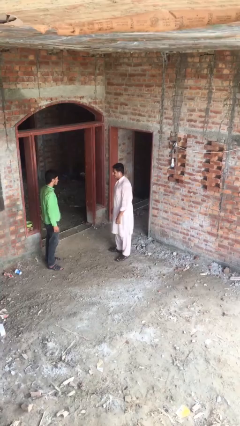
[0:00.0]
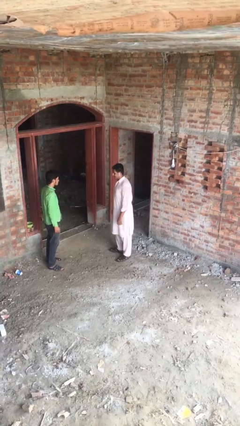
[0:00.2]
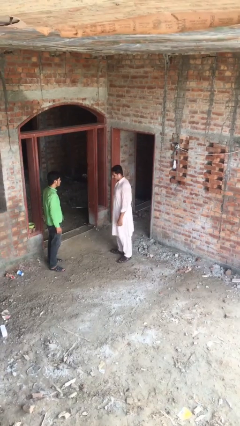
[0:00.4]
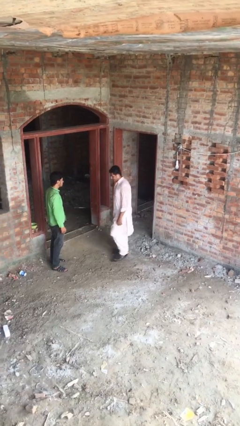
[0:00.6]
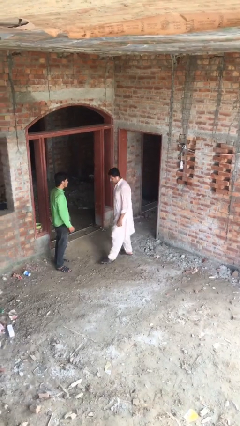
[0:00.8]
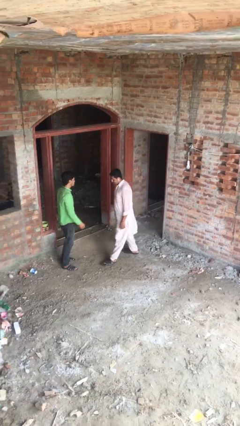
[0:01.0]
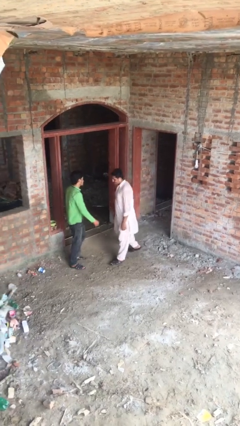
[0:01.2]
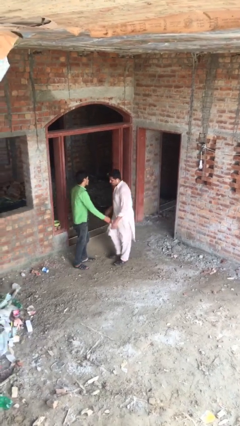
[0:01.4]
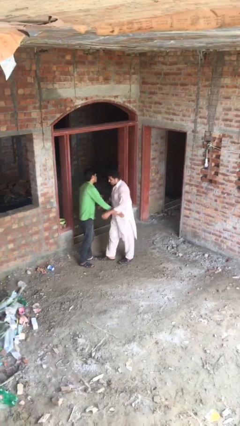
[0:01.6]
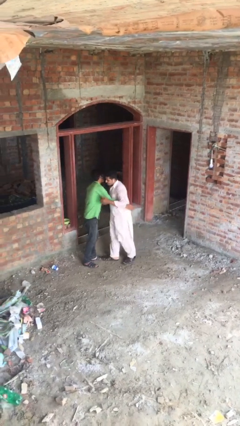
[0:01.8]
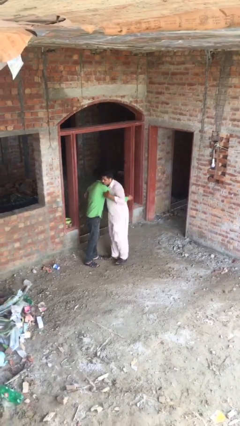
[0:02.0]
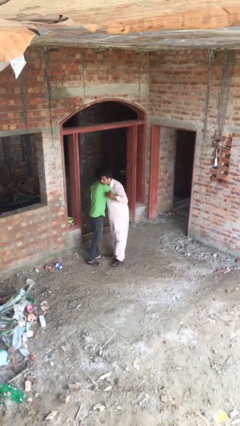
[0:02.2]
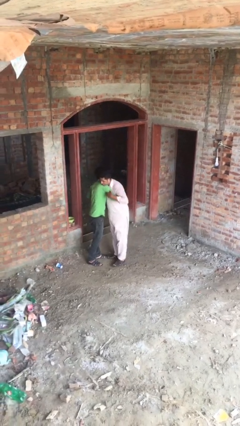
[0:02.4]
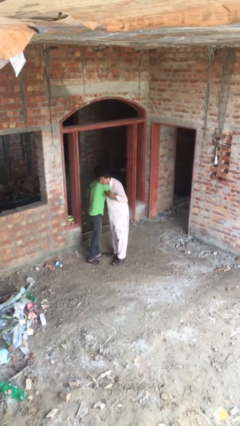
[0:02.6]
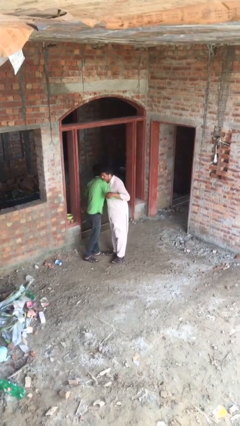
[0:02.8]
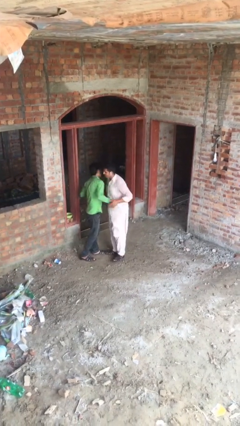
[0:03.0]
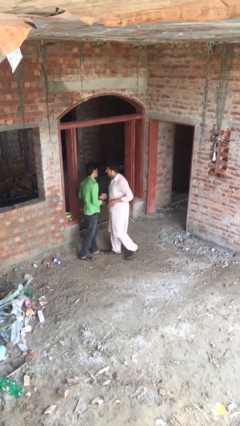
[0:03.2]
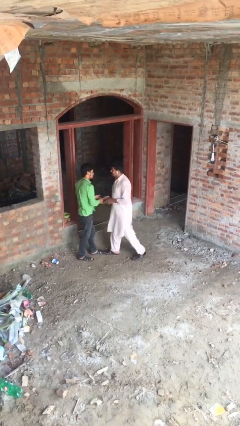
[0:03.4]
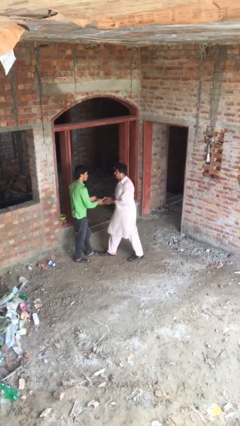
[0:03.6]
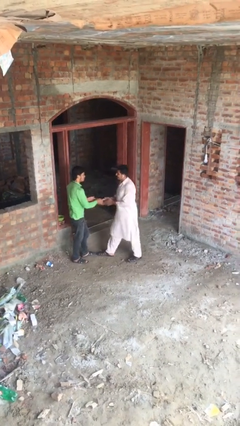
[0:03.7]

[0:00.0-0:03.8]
person embraces person

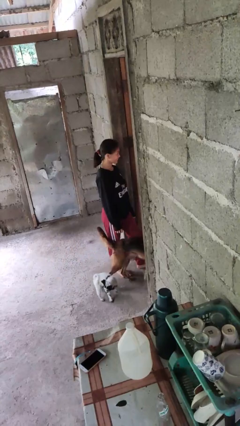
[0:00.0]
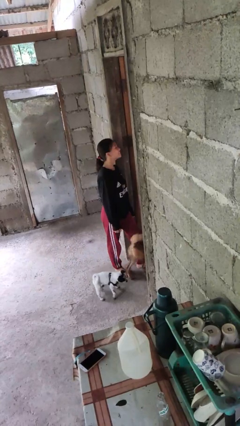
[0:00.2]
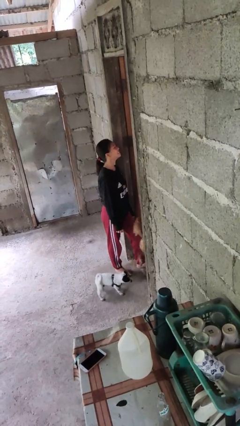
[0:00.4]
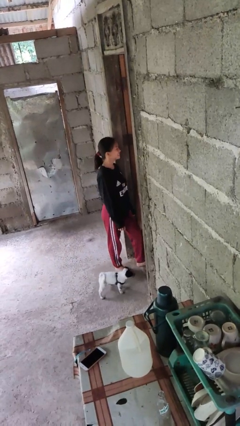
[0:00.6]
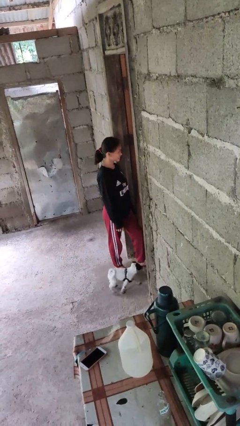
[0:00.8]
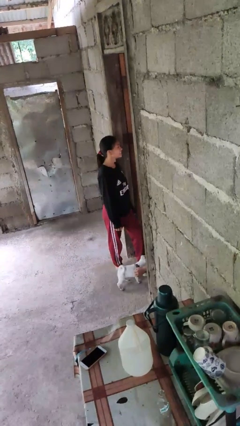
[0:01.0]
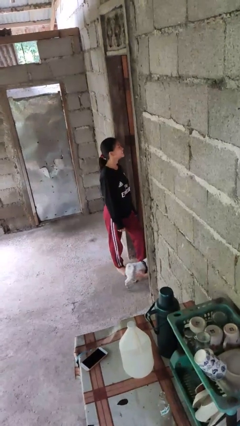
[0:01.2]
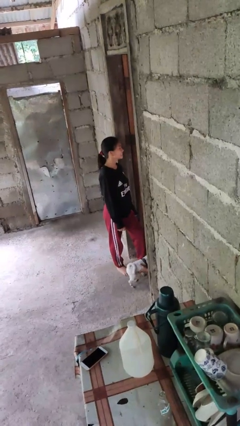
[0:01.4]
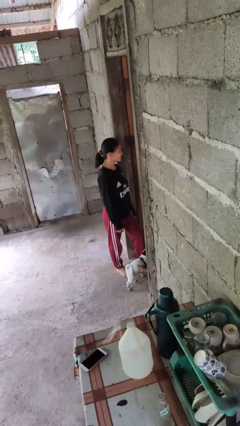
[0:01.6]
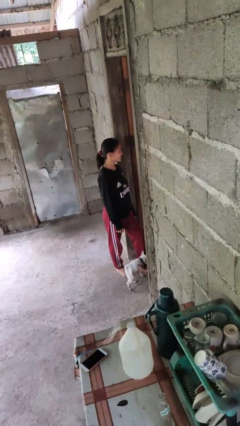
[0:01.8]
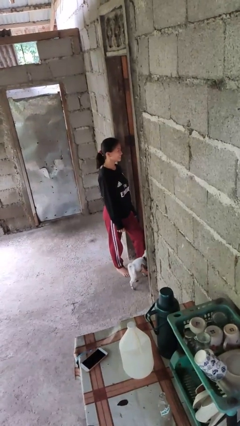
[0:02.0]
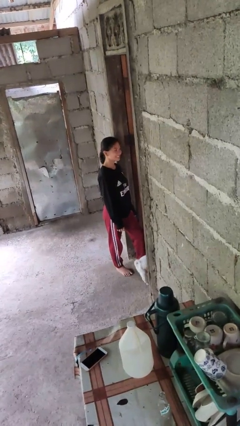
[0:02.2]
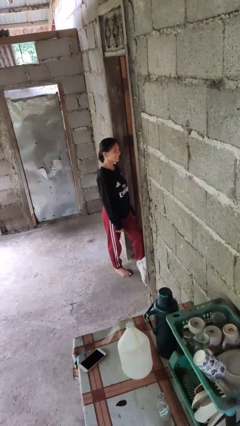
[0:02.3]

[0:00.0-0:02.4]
person nods head

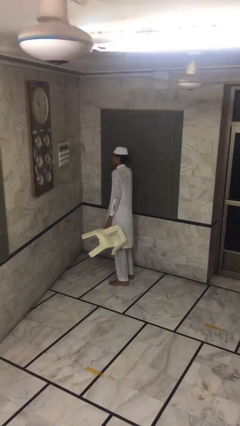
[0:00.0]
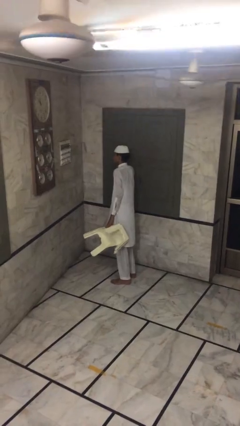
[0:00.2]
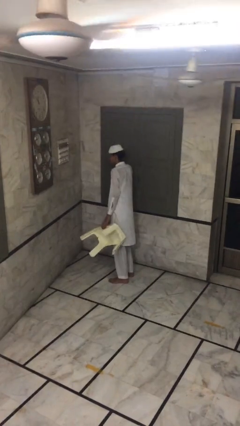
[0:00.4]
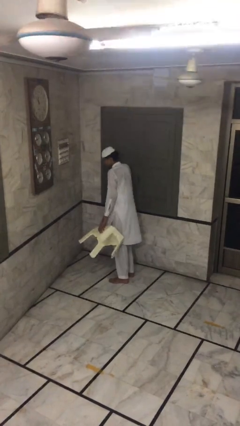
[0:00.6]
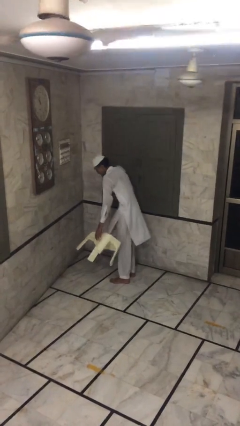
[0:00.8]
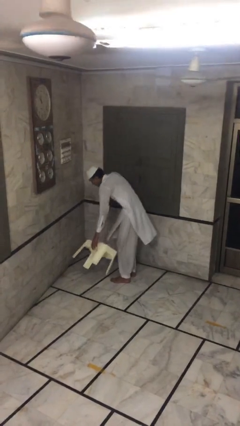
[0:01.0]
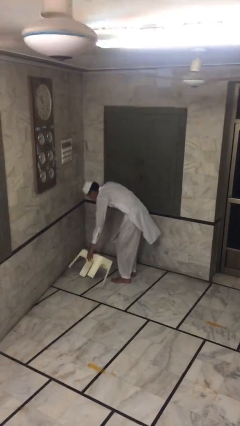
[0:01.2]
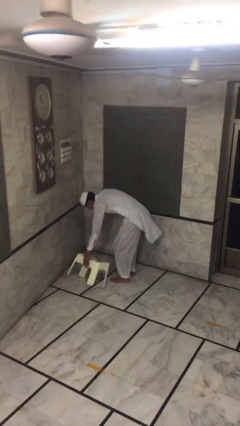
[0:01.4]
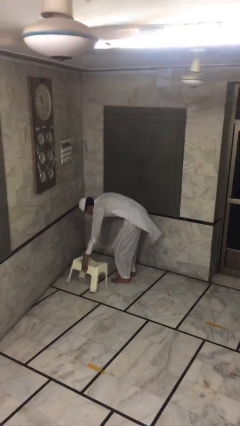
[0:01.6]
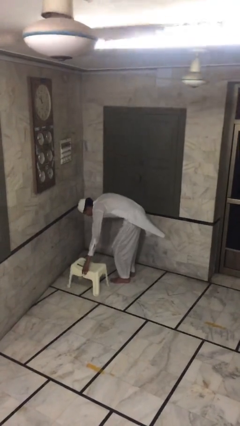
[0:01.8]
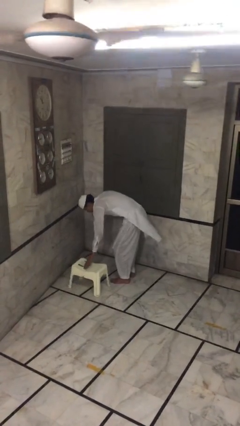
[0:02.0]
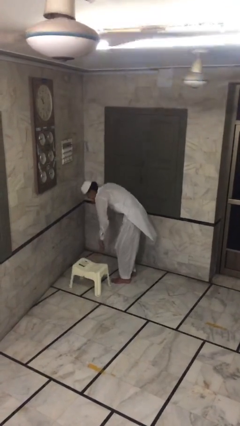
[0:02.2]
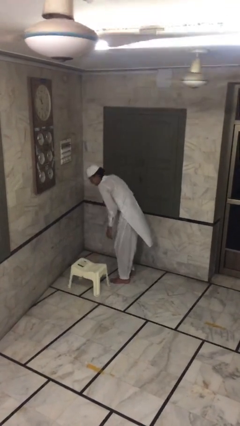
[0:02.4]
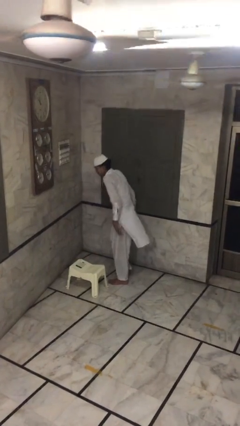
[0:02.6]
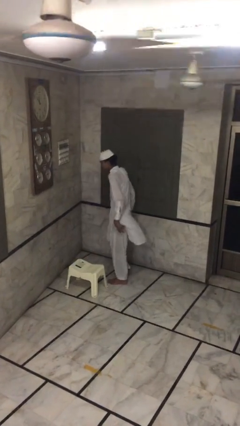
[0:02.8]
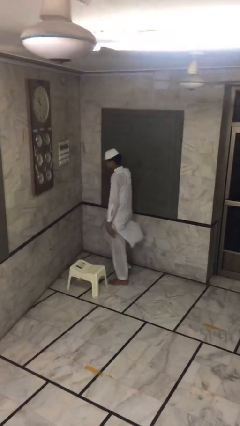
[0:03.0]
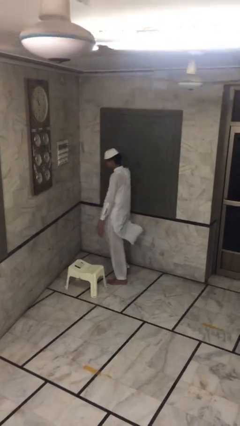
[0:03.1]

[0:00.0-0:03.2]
person puts down object on floor

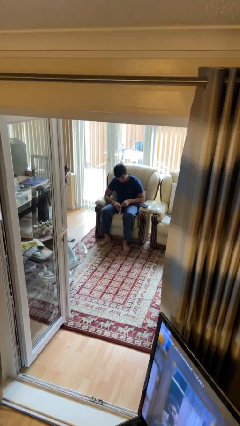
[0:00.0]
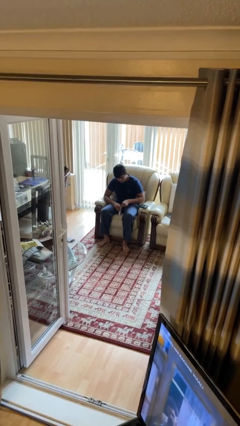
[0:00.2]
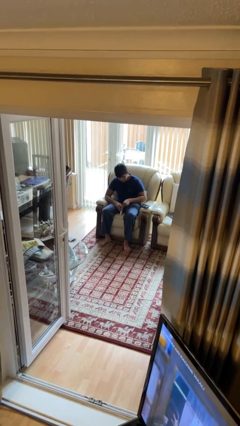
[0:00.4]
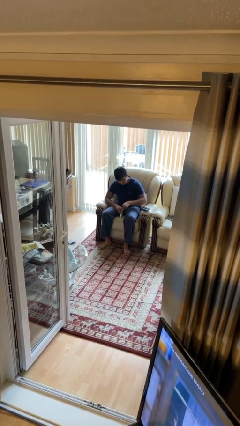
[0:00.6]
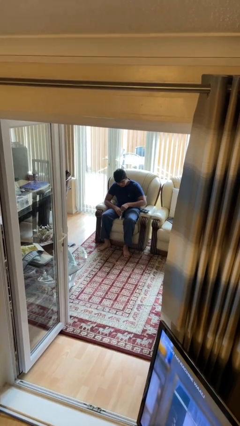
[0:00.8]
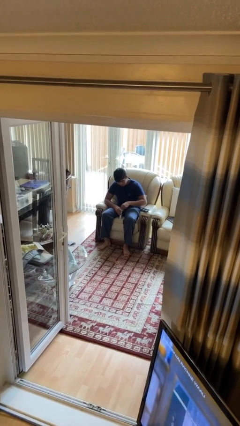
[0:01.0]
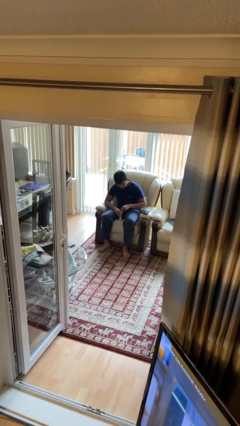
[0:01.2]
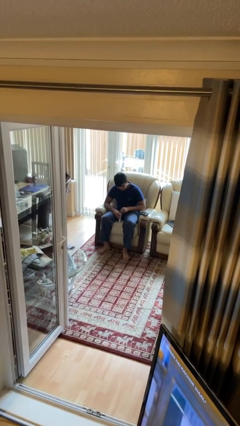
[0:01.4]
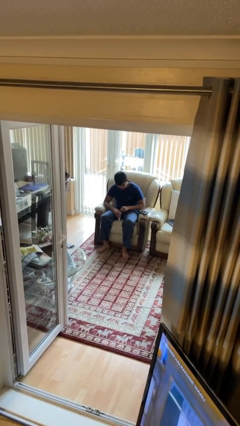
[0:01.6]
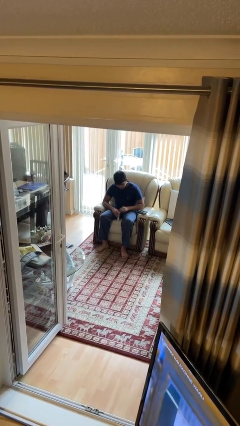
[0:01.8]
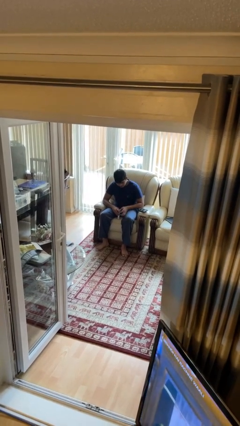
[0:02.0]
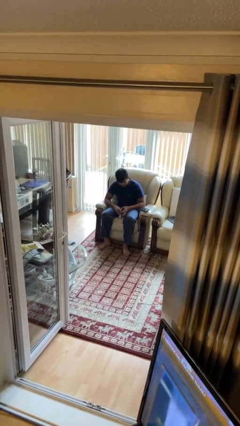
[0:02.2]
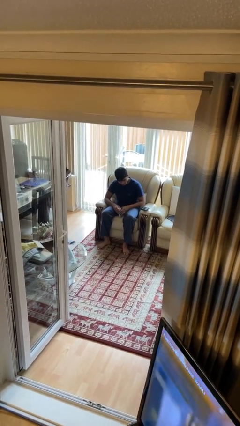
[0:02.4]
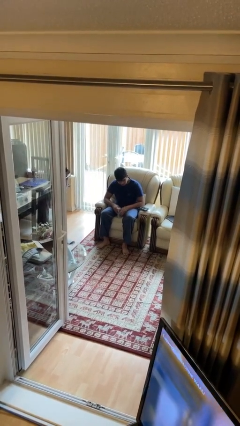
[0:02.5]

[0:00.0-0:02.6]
person opens beverage can

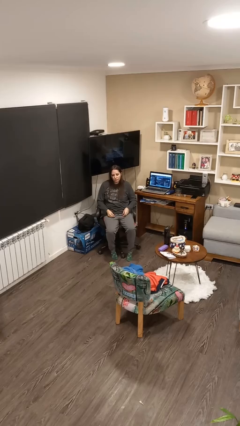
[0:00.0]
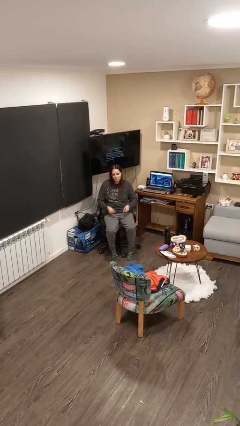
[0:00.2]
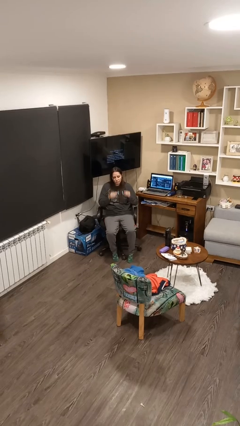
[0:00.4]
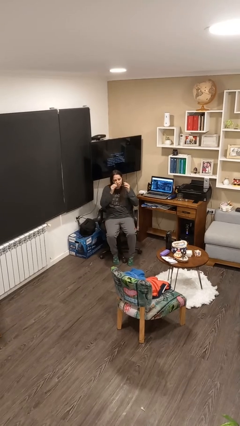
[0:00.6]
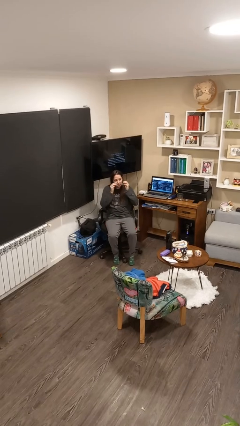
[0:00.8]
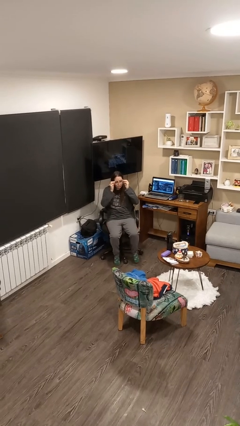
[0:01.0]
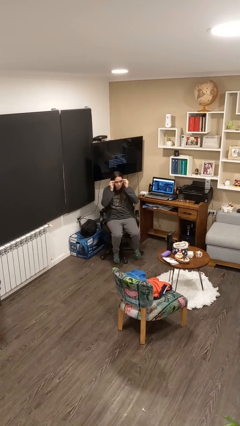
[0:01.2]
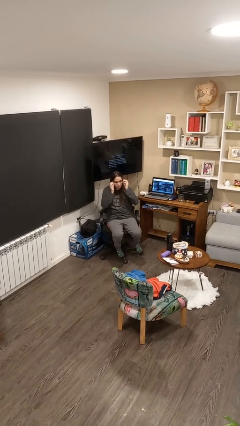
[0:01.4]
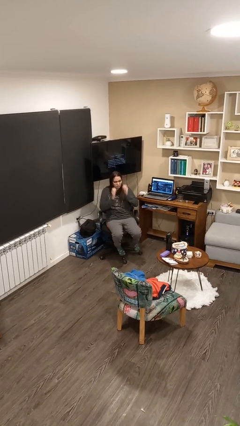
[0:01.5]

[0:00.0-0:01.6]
person puts on glasses

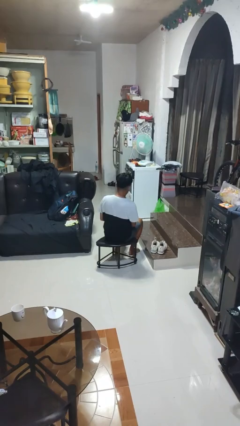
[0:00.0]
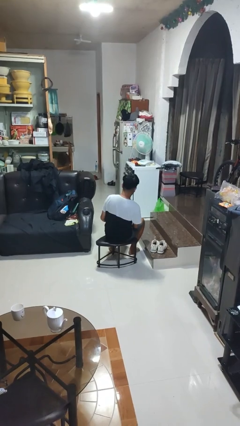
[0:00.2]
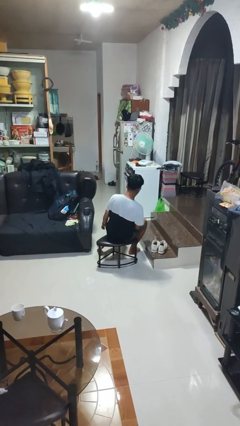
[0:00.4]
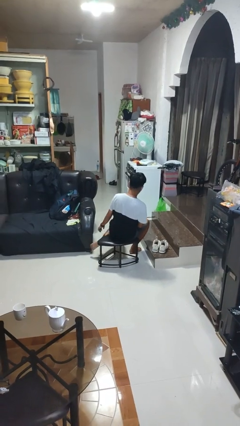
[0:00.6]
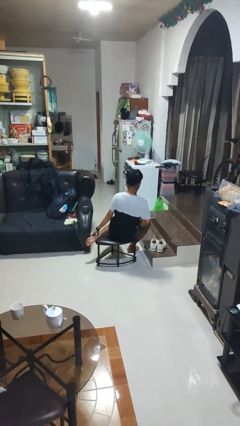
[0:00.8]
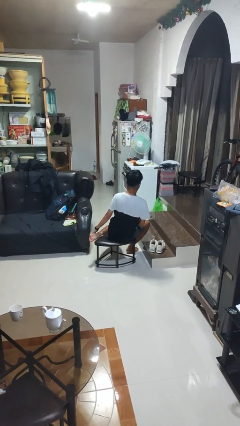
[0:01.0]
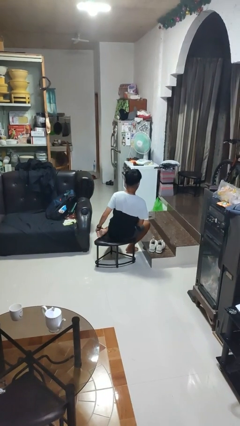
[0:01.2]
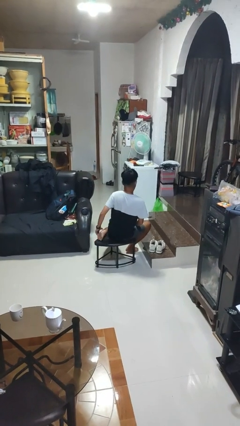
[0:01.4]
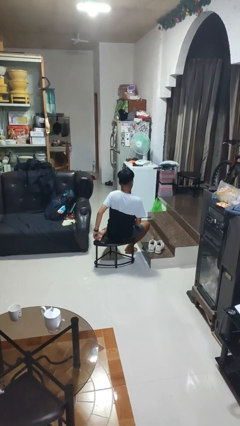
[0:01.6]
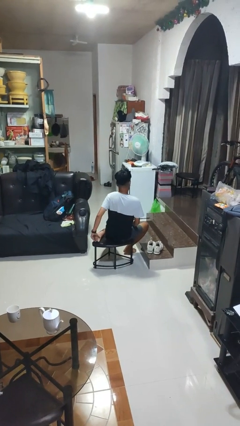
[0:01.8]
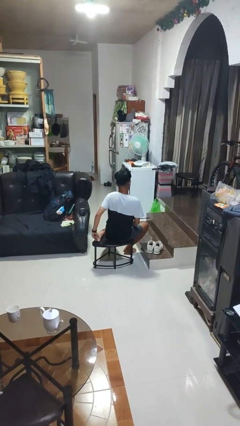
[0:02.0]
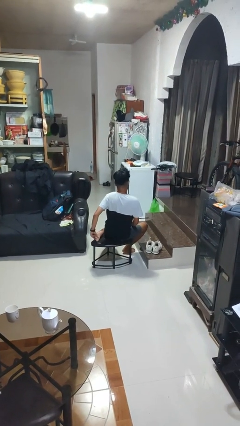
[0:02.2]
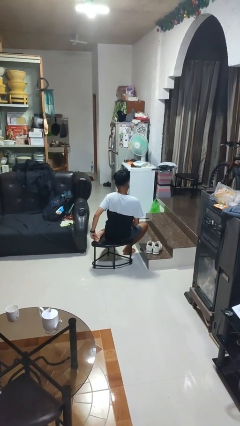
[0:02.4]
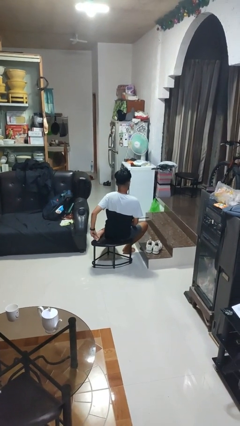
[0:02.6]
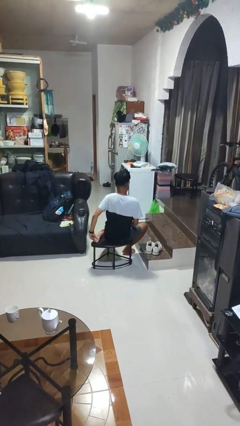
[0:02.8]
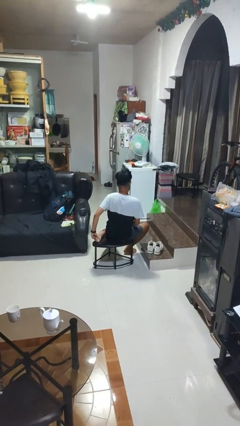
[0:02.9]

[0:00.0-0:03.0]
person rubs foot

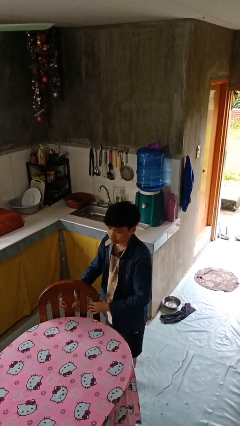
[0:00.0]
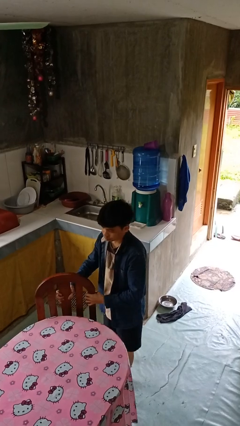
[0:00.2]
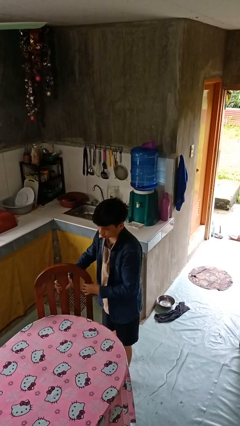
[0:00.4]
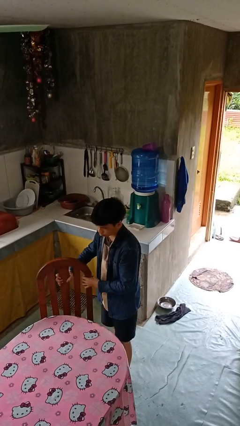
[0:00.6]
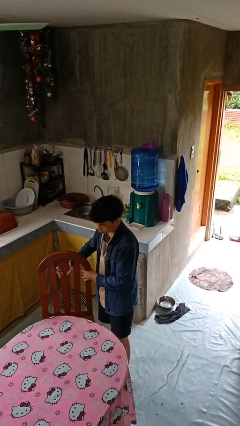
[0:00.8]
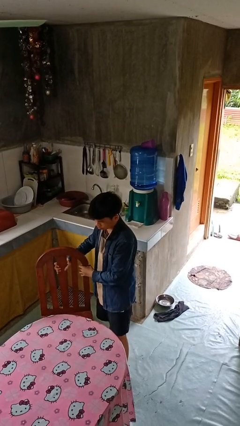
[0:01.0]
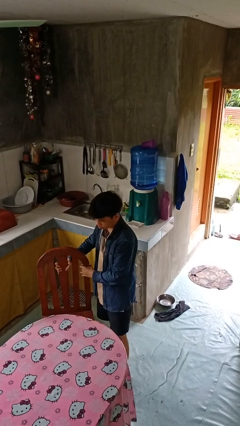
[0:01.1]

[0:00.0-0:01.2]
person pulls out chair
